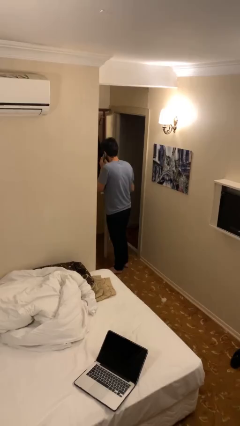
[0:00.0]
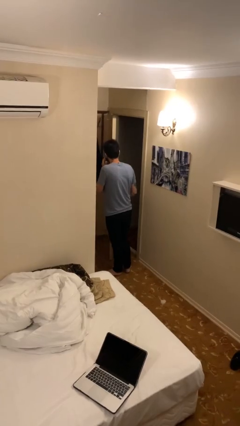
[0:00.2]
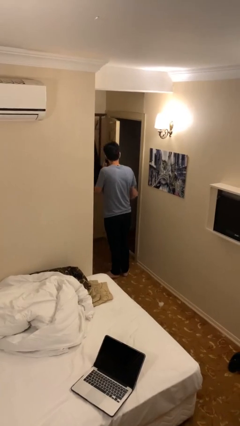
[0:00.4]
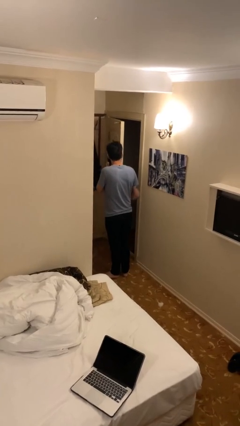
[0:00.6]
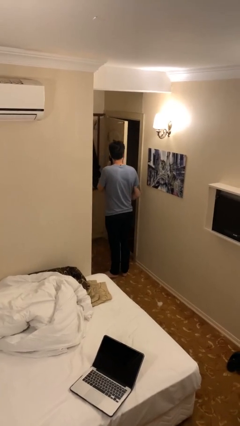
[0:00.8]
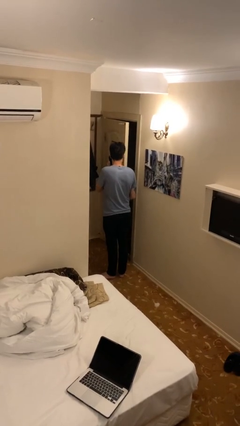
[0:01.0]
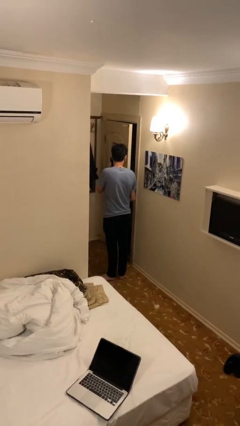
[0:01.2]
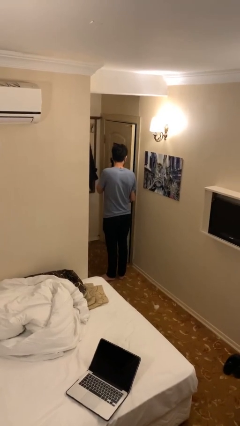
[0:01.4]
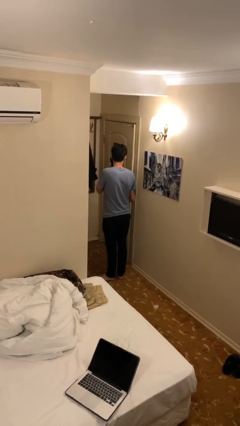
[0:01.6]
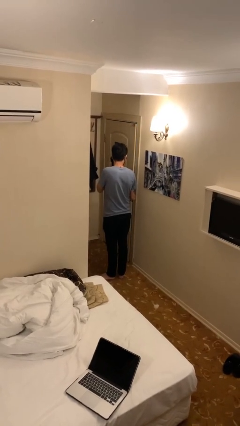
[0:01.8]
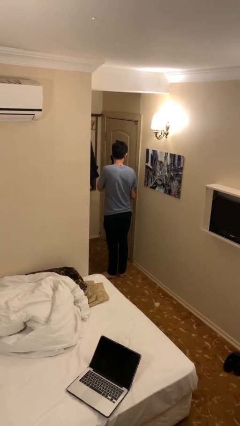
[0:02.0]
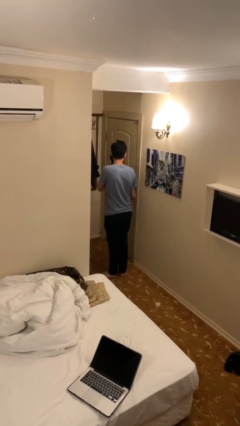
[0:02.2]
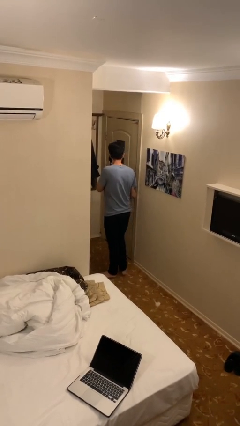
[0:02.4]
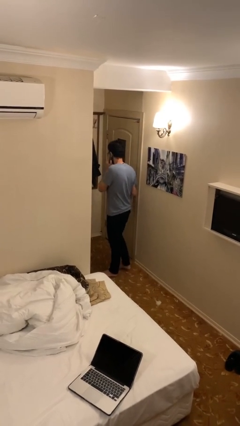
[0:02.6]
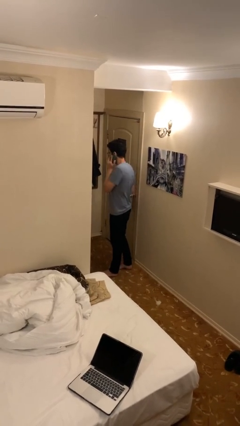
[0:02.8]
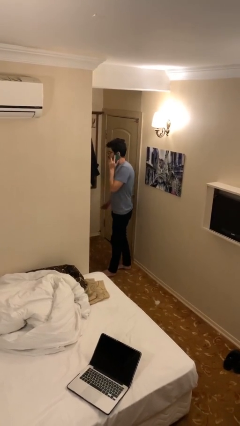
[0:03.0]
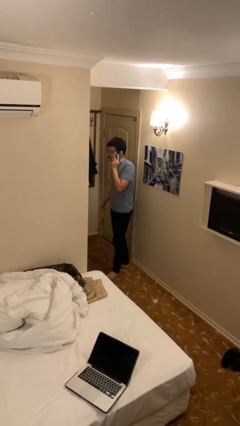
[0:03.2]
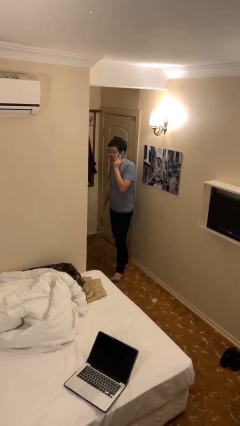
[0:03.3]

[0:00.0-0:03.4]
person closes facility door

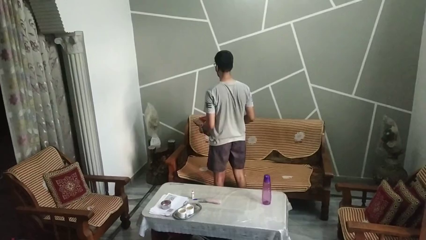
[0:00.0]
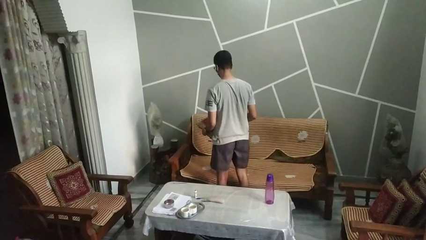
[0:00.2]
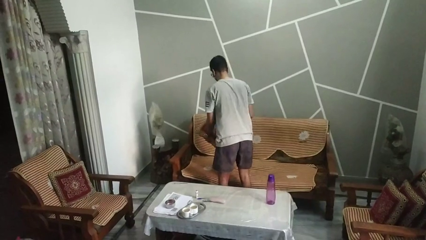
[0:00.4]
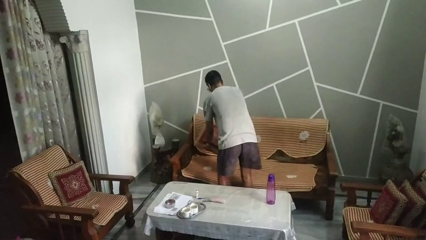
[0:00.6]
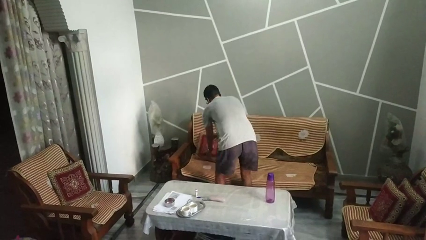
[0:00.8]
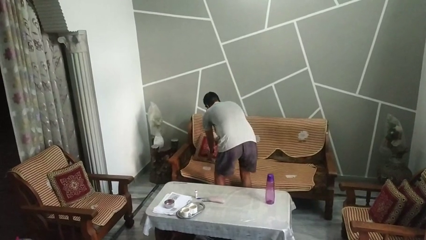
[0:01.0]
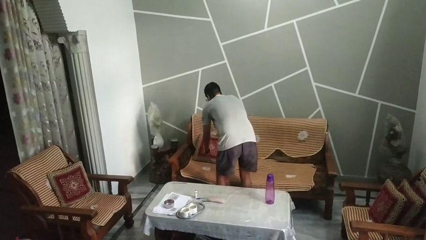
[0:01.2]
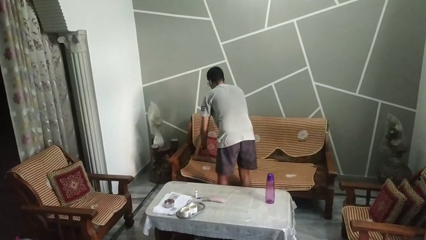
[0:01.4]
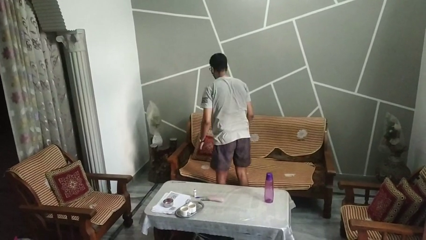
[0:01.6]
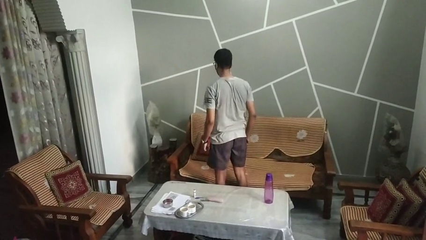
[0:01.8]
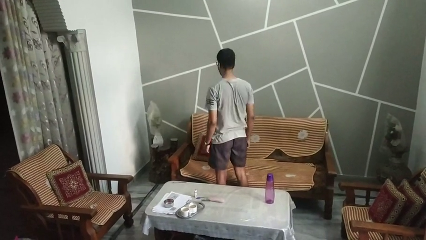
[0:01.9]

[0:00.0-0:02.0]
person puts down object on couch

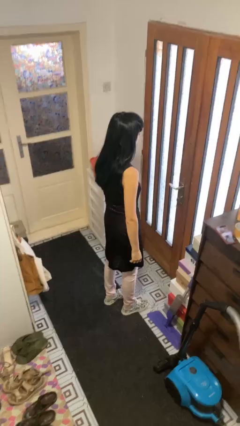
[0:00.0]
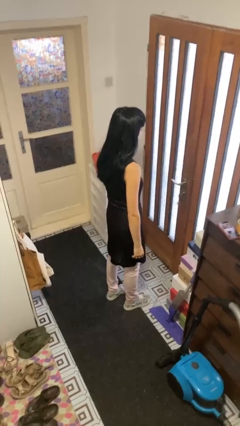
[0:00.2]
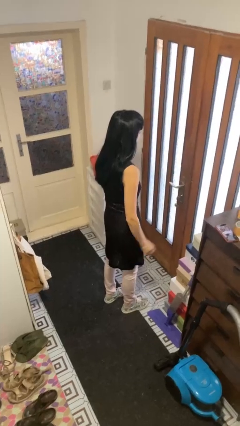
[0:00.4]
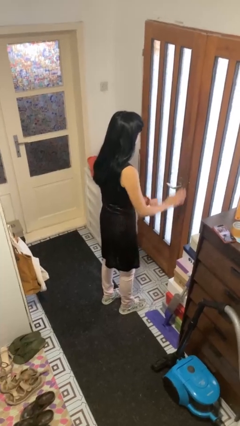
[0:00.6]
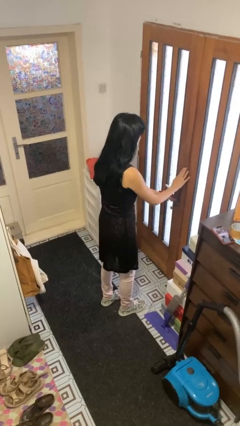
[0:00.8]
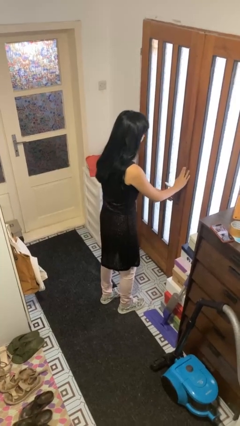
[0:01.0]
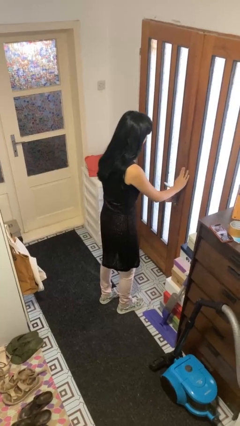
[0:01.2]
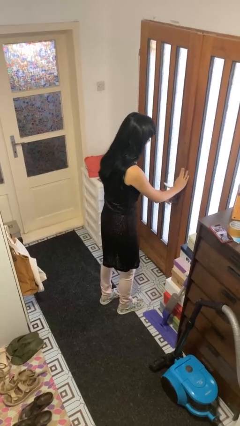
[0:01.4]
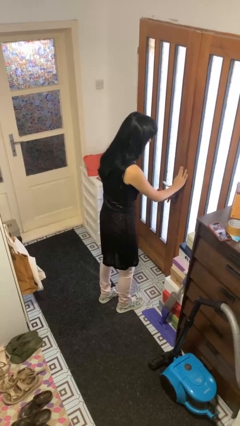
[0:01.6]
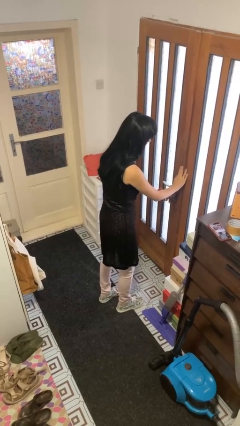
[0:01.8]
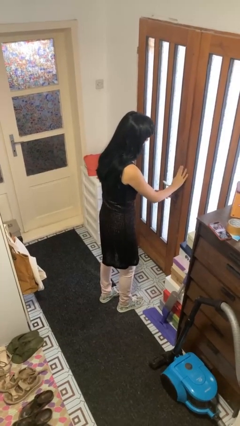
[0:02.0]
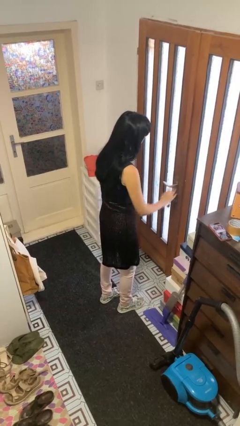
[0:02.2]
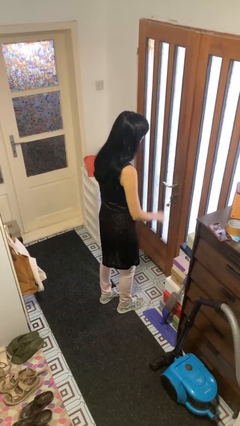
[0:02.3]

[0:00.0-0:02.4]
person unlocks door with keys

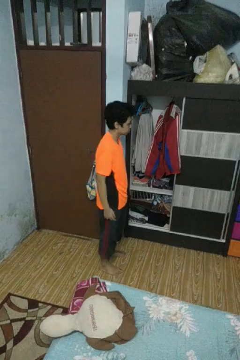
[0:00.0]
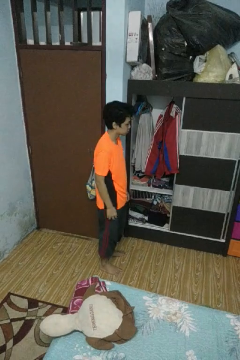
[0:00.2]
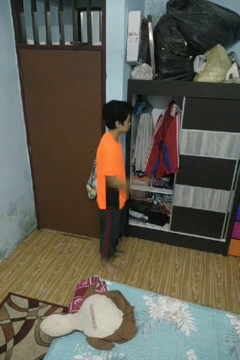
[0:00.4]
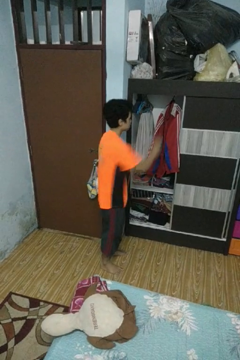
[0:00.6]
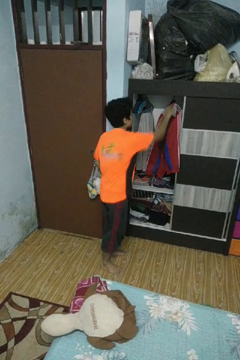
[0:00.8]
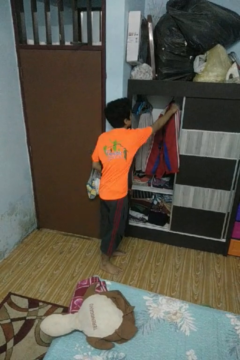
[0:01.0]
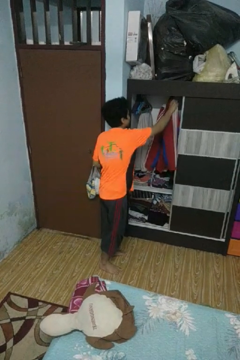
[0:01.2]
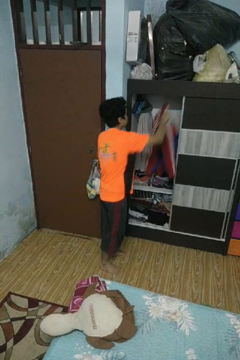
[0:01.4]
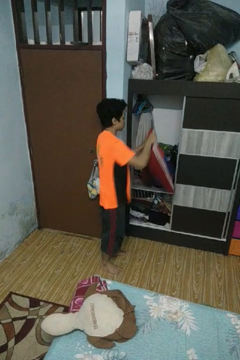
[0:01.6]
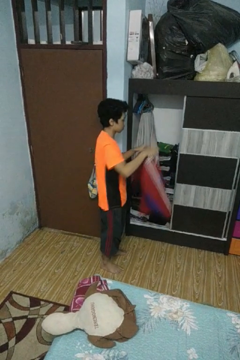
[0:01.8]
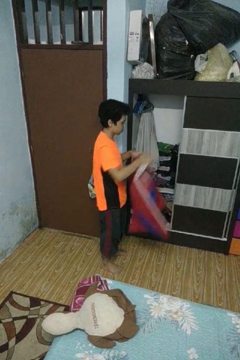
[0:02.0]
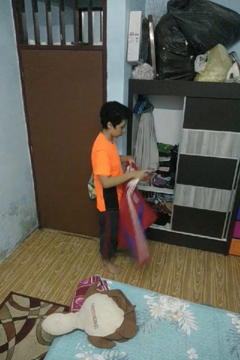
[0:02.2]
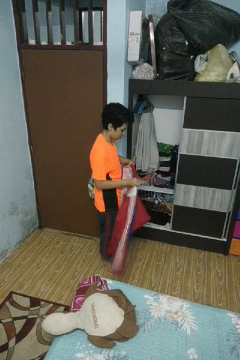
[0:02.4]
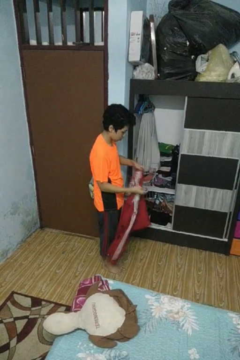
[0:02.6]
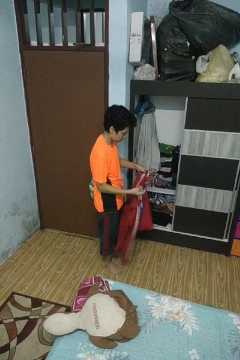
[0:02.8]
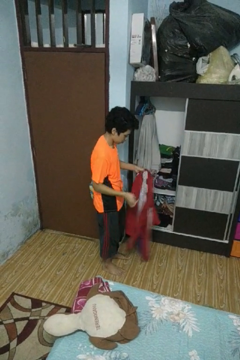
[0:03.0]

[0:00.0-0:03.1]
person takes clothes from closet

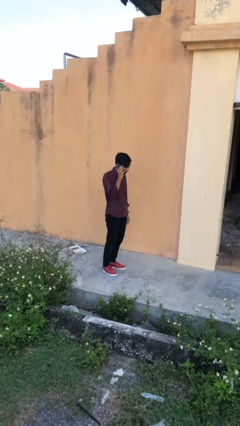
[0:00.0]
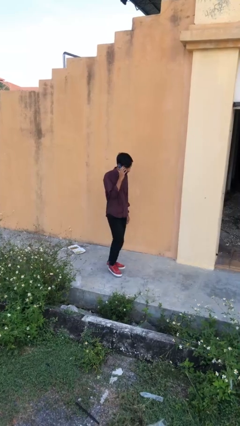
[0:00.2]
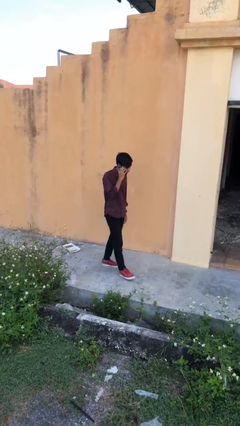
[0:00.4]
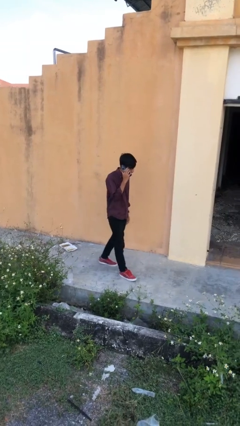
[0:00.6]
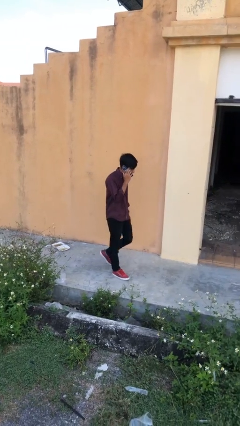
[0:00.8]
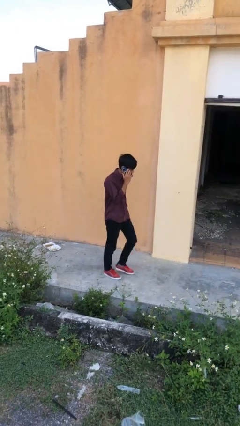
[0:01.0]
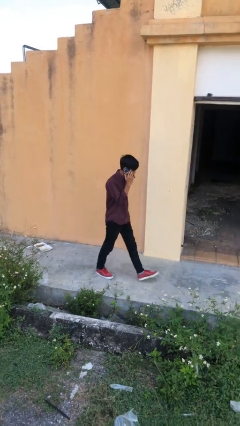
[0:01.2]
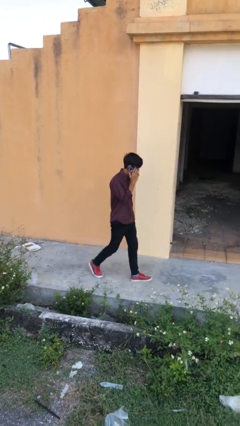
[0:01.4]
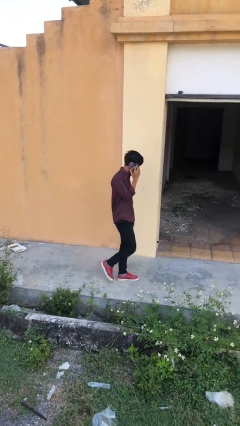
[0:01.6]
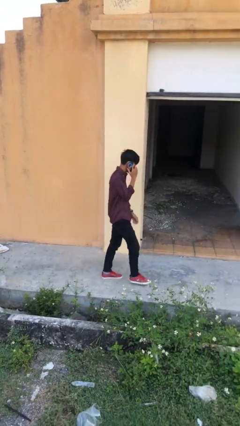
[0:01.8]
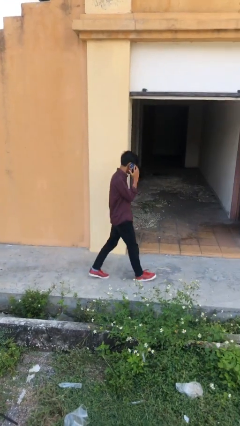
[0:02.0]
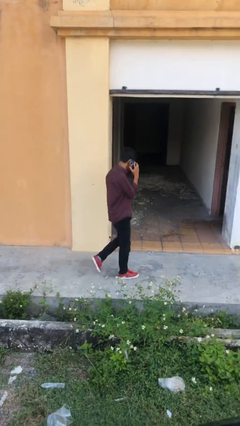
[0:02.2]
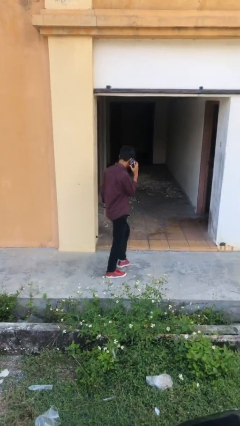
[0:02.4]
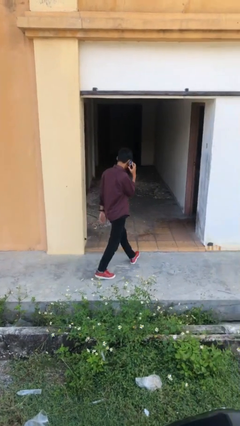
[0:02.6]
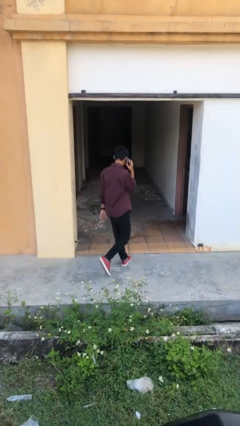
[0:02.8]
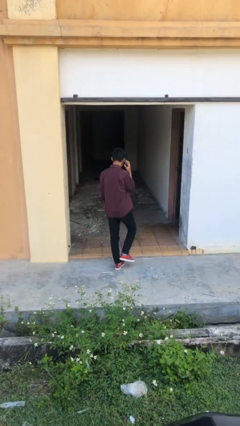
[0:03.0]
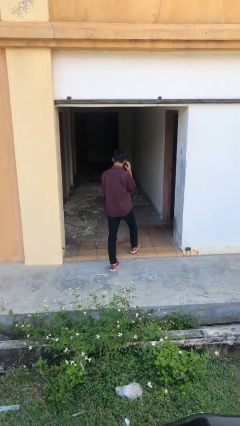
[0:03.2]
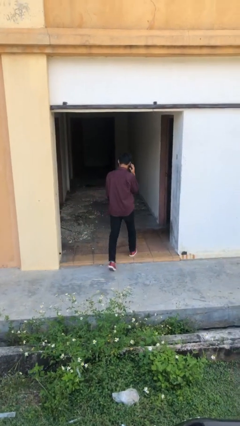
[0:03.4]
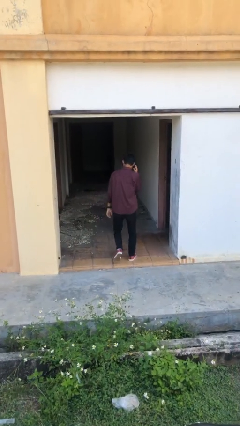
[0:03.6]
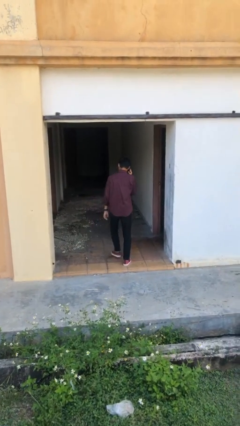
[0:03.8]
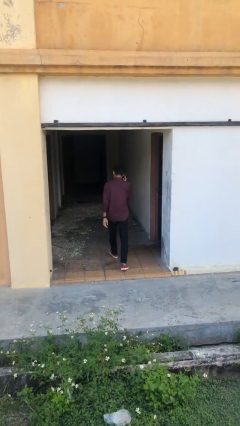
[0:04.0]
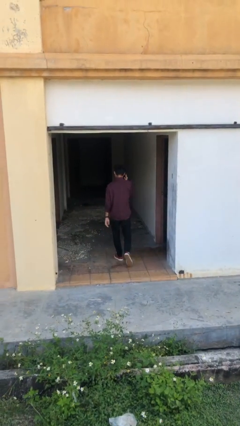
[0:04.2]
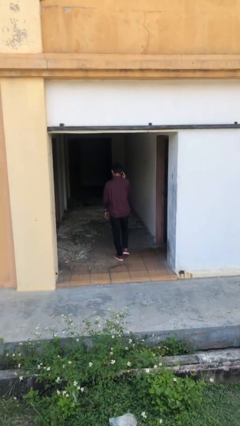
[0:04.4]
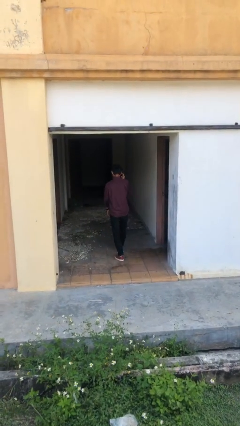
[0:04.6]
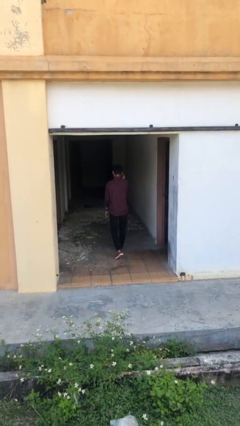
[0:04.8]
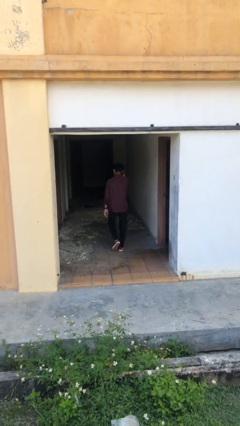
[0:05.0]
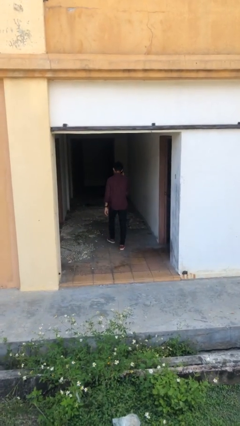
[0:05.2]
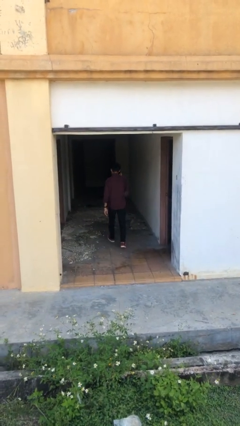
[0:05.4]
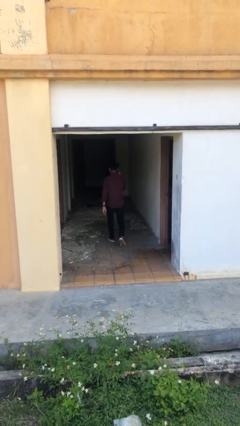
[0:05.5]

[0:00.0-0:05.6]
person exits scene through structure

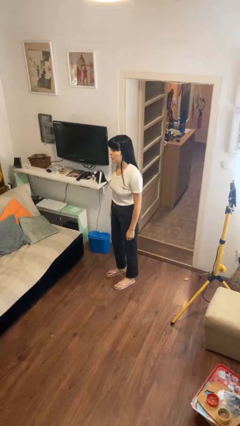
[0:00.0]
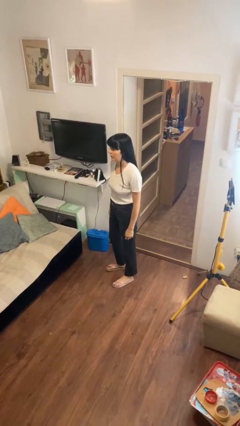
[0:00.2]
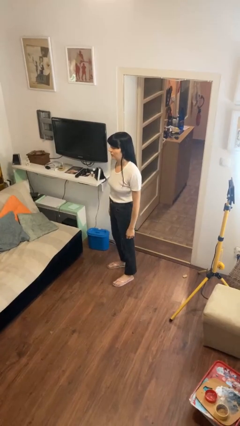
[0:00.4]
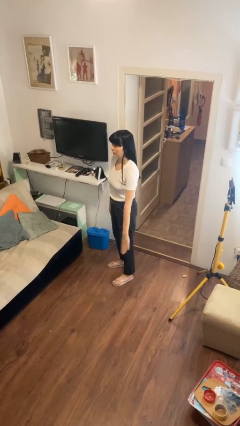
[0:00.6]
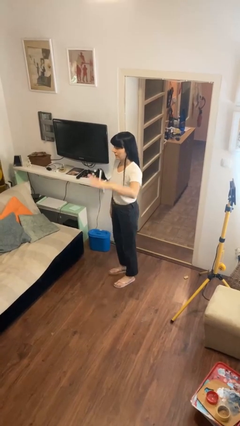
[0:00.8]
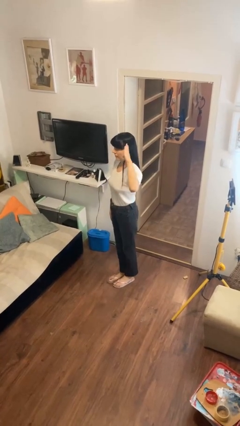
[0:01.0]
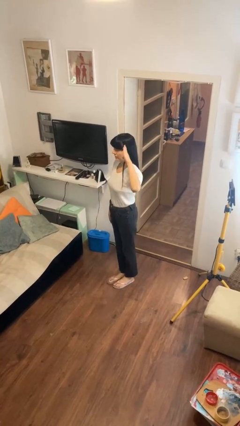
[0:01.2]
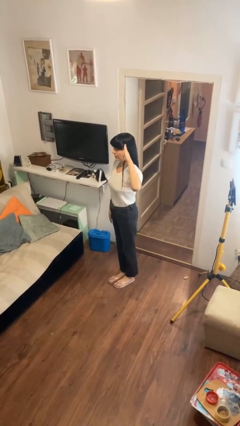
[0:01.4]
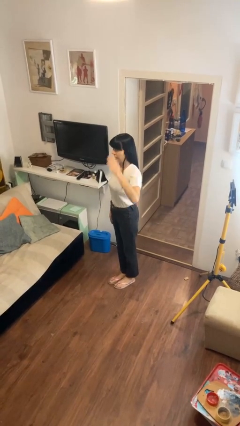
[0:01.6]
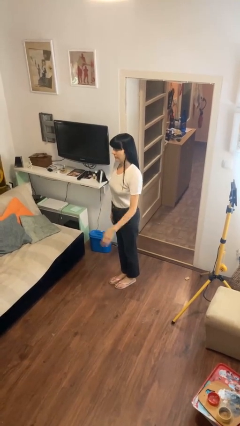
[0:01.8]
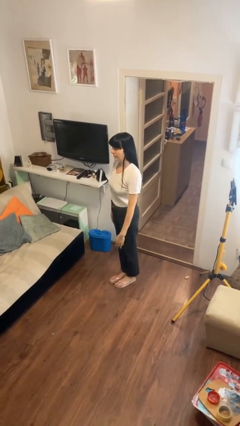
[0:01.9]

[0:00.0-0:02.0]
person salutes
